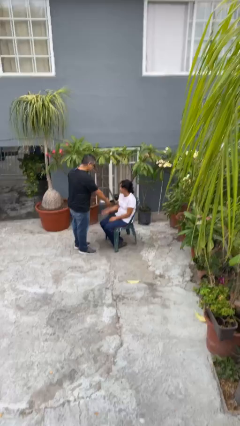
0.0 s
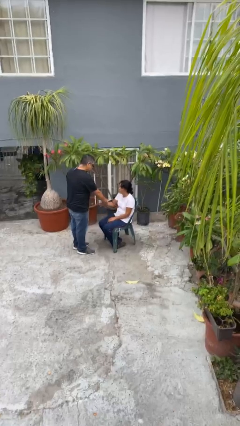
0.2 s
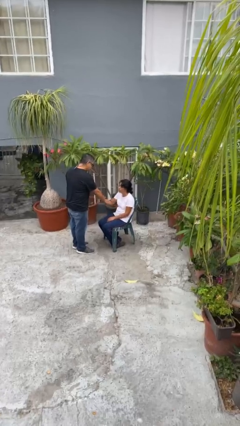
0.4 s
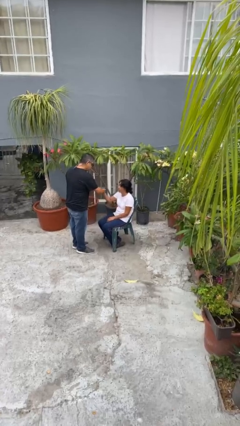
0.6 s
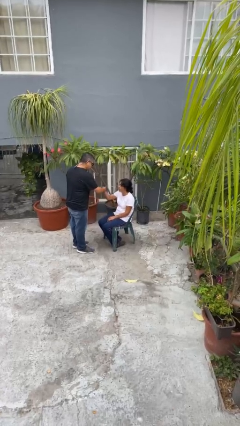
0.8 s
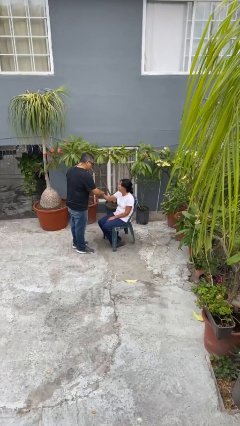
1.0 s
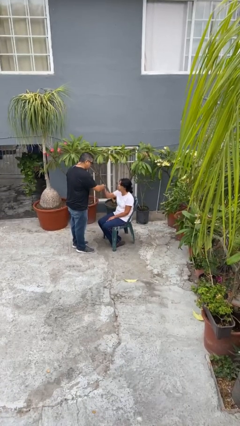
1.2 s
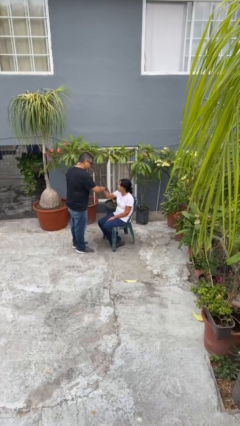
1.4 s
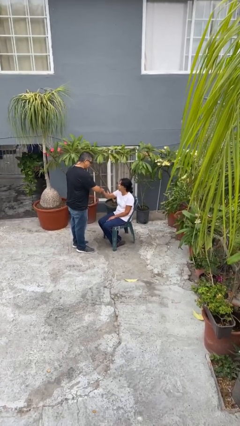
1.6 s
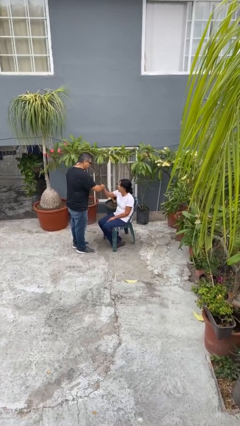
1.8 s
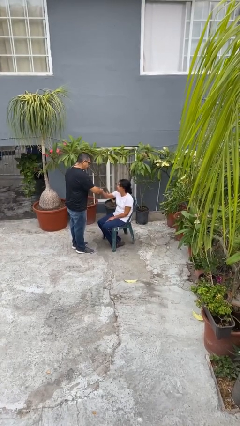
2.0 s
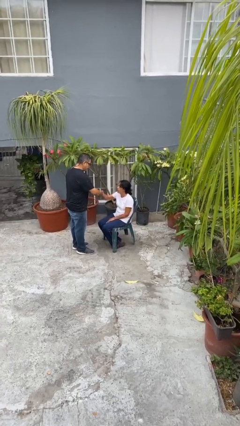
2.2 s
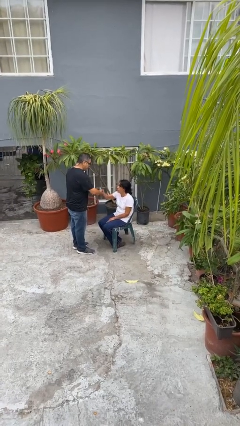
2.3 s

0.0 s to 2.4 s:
person shakes hand

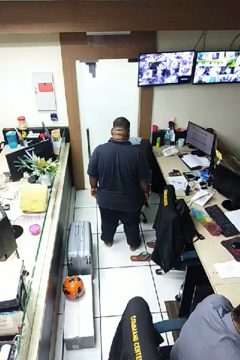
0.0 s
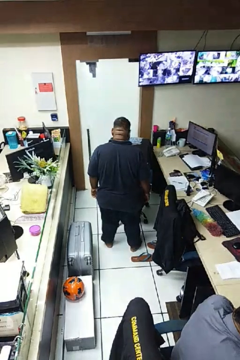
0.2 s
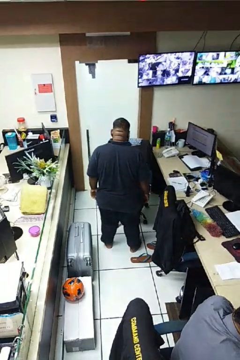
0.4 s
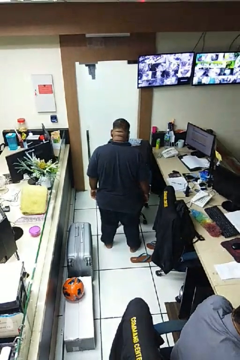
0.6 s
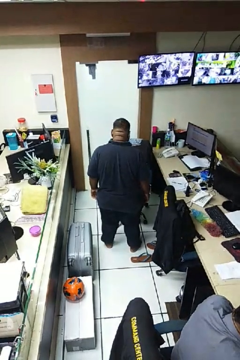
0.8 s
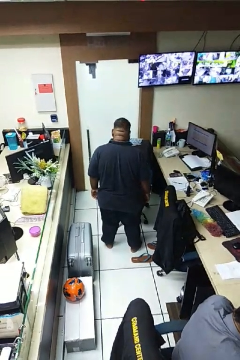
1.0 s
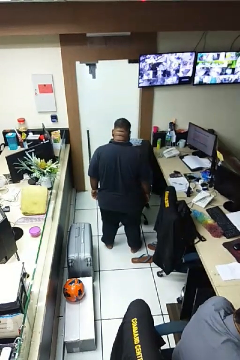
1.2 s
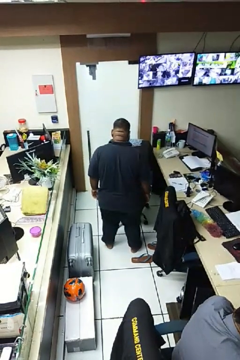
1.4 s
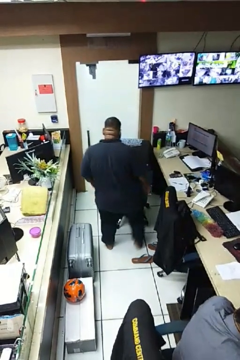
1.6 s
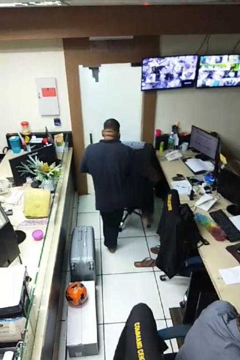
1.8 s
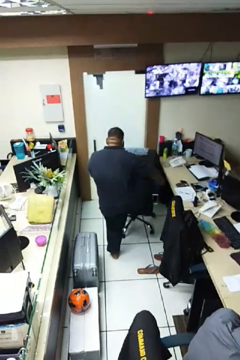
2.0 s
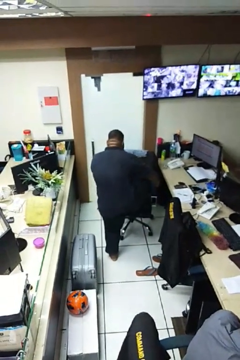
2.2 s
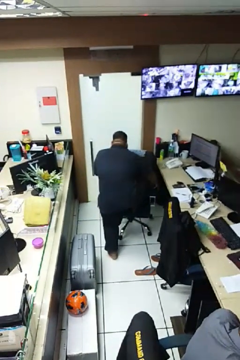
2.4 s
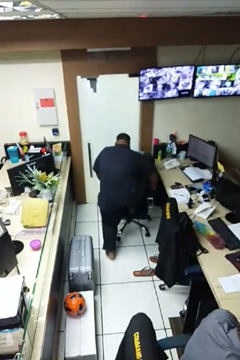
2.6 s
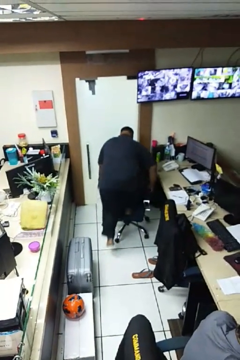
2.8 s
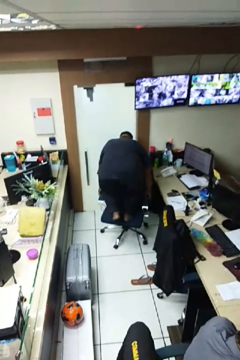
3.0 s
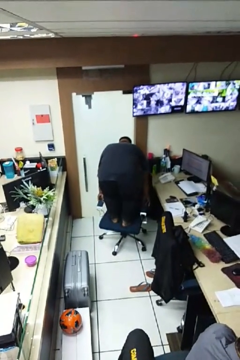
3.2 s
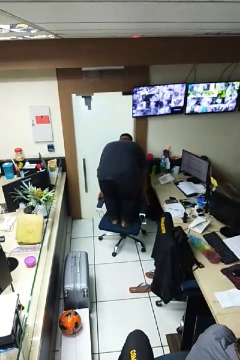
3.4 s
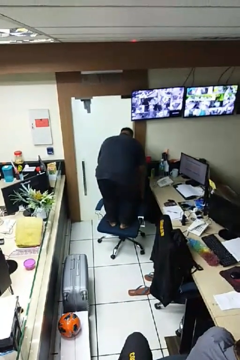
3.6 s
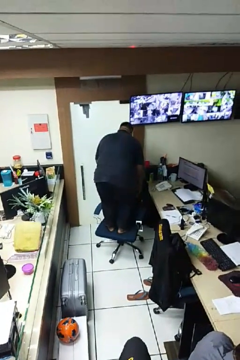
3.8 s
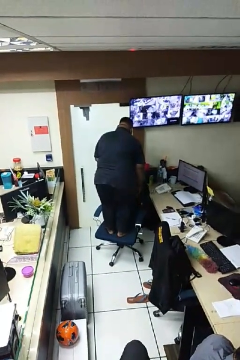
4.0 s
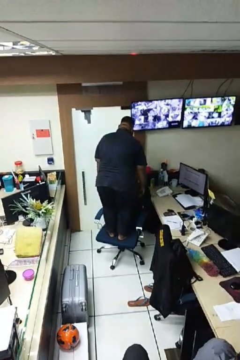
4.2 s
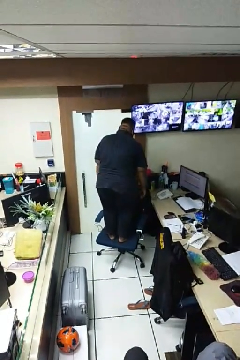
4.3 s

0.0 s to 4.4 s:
person climbs on chair

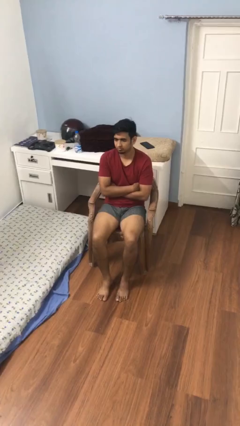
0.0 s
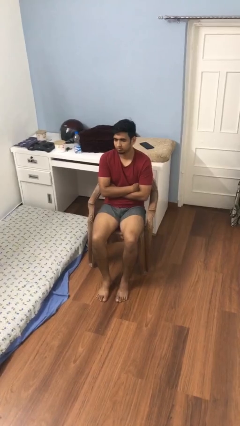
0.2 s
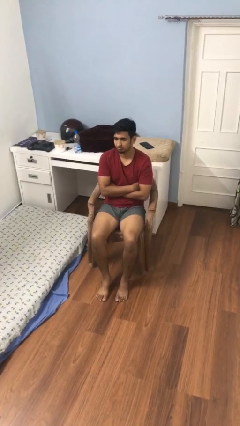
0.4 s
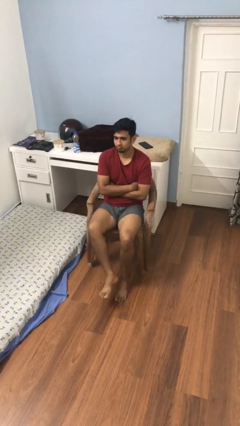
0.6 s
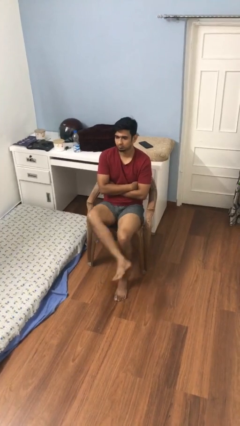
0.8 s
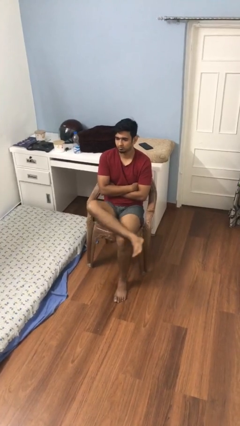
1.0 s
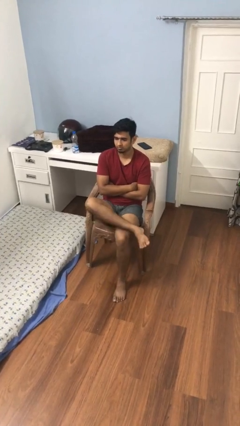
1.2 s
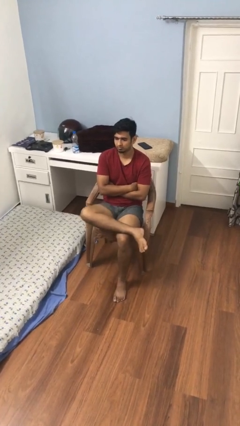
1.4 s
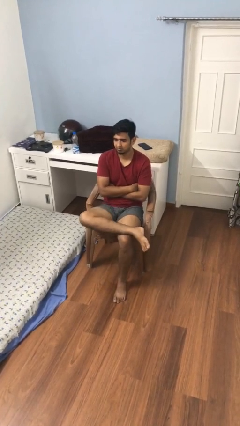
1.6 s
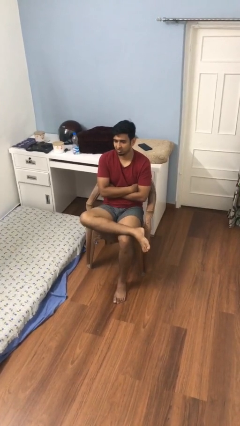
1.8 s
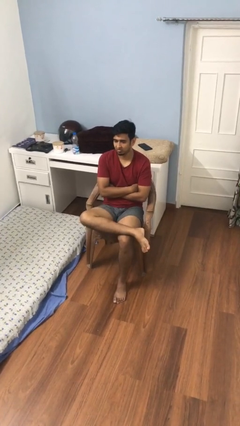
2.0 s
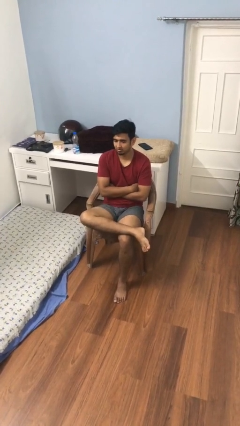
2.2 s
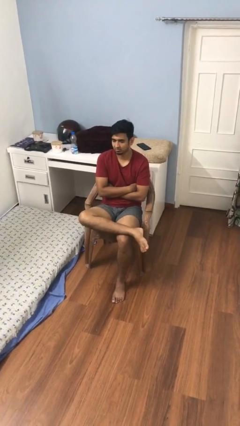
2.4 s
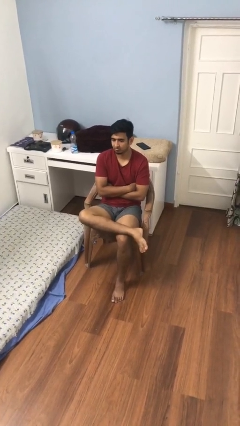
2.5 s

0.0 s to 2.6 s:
person crosses legs

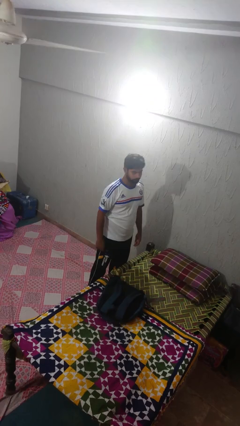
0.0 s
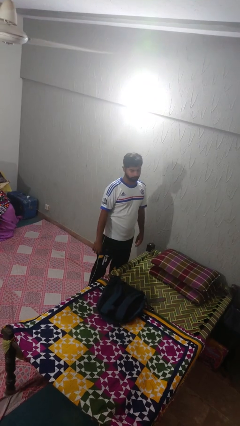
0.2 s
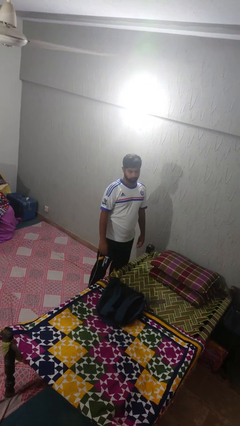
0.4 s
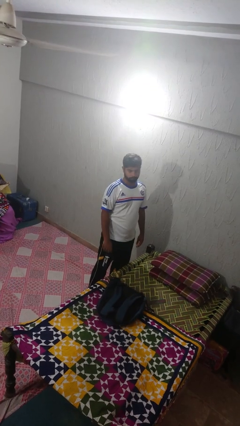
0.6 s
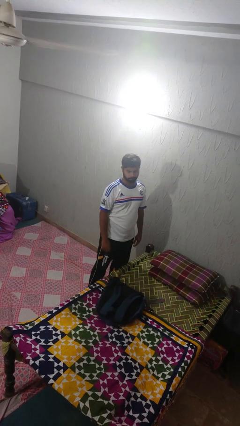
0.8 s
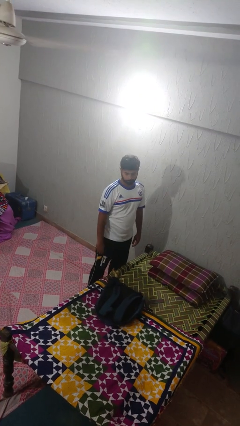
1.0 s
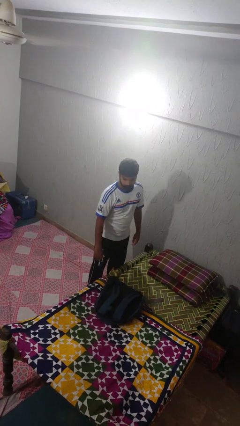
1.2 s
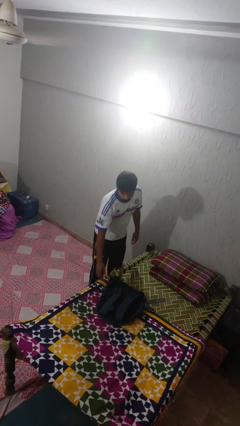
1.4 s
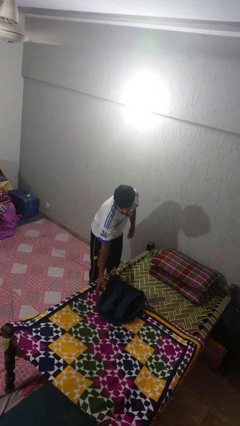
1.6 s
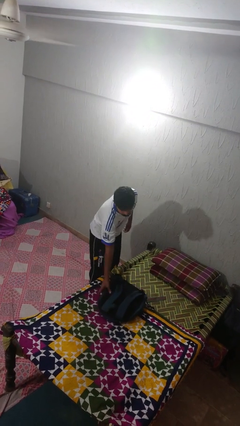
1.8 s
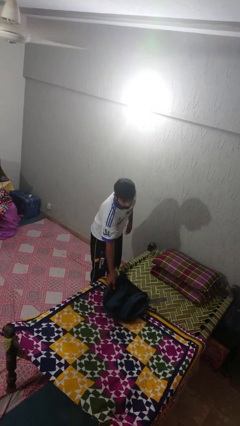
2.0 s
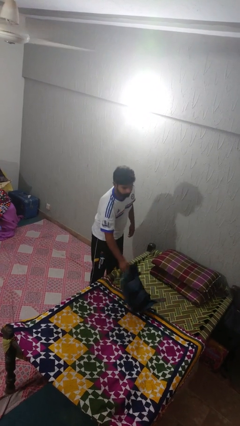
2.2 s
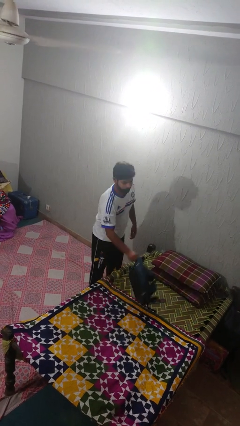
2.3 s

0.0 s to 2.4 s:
person picks up object from bed

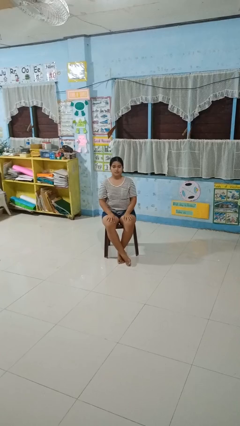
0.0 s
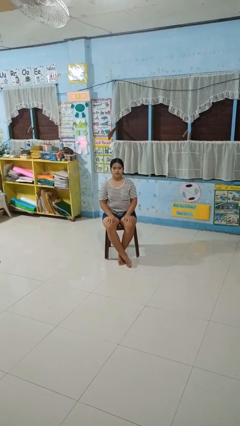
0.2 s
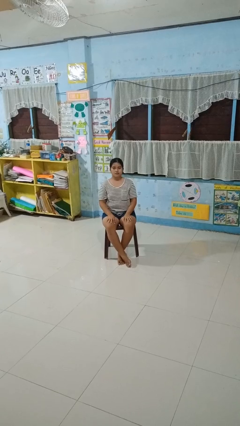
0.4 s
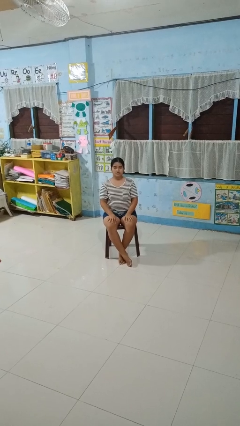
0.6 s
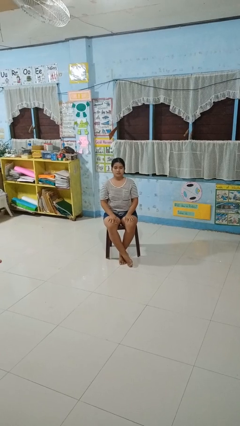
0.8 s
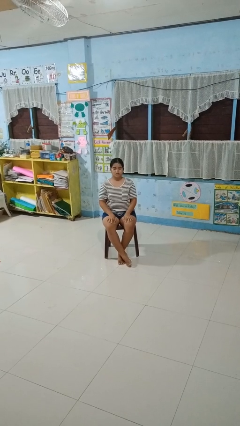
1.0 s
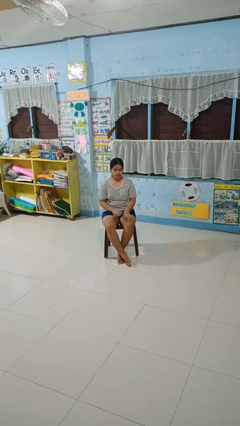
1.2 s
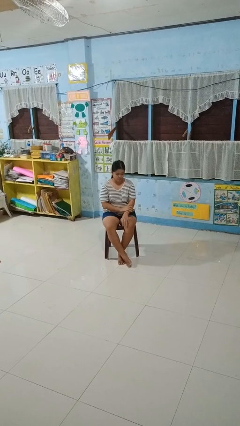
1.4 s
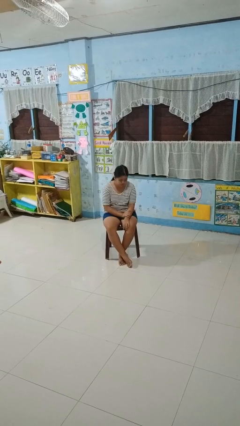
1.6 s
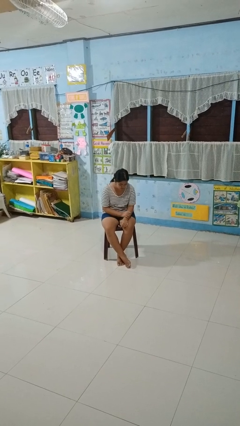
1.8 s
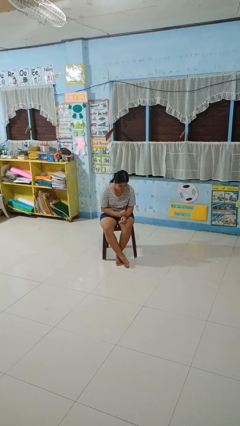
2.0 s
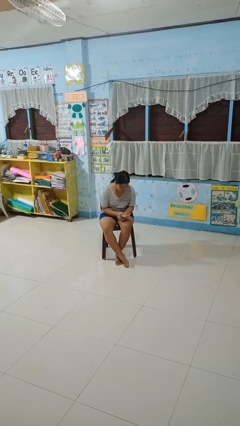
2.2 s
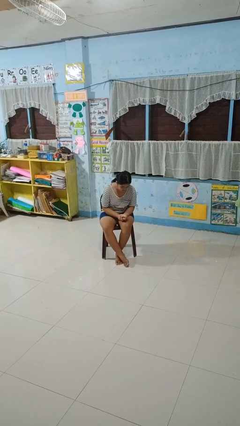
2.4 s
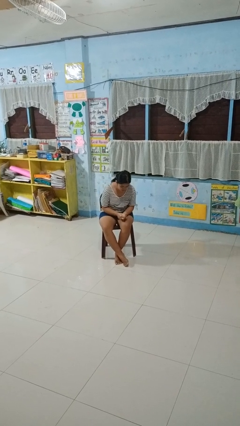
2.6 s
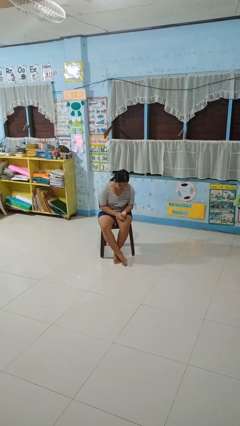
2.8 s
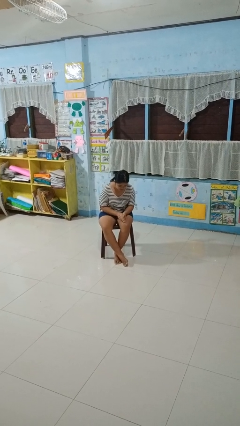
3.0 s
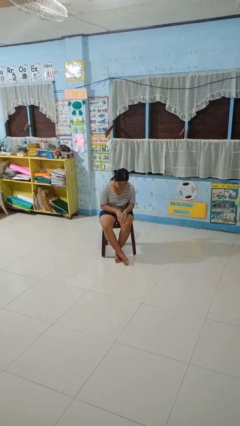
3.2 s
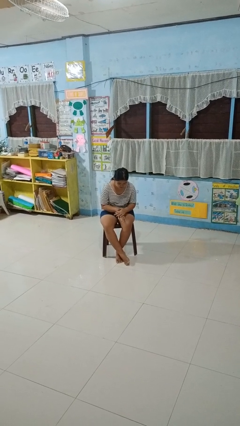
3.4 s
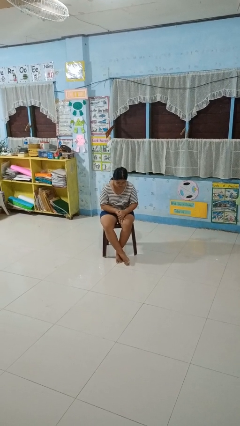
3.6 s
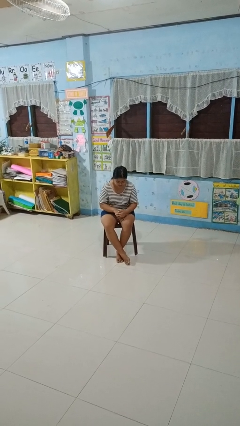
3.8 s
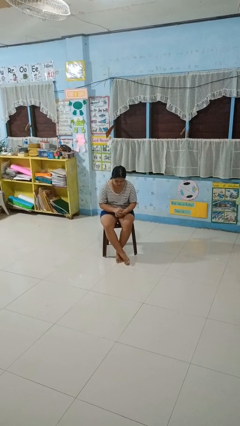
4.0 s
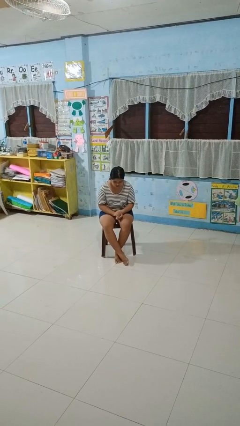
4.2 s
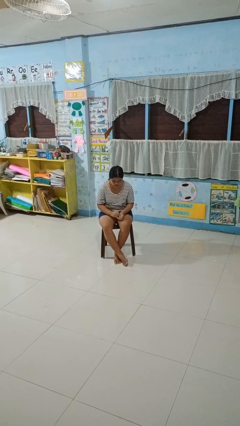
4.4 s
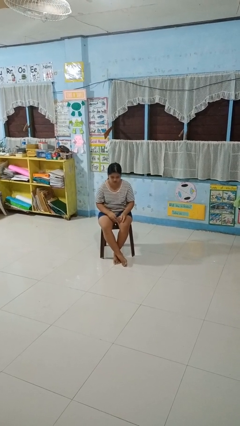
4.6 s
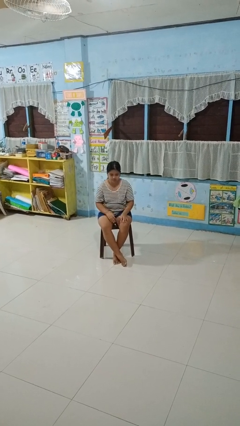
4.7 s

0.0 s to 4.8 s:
person looks at hands in lap

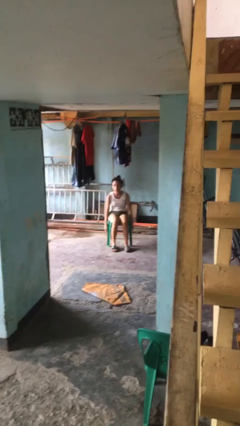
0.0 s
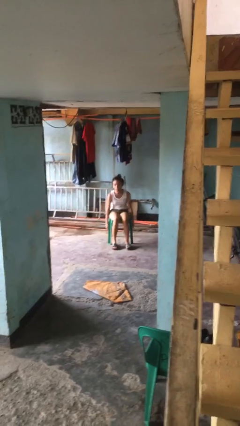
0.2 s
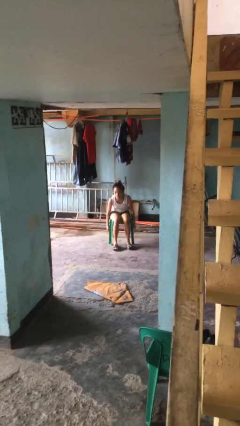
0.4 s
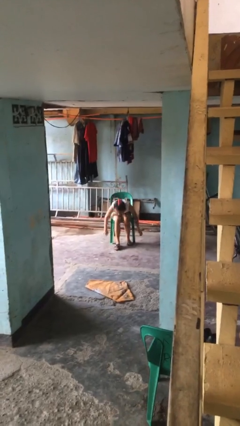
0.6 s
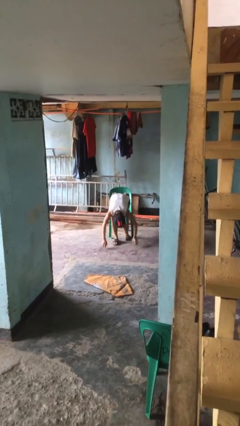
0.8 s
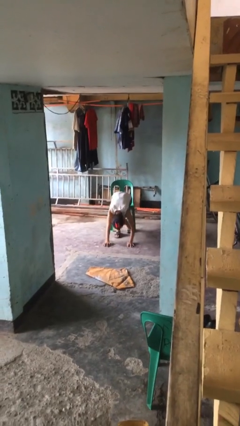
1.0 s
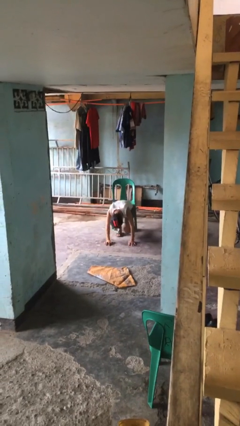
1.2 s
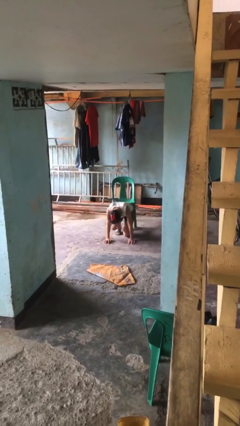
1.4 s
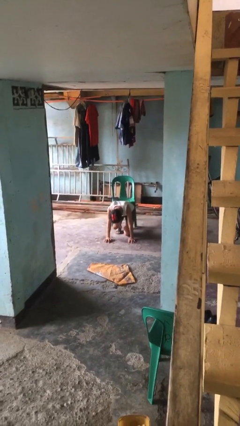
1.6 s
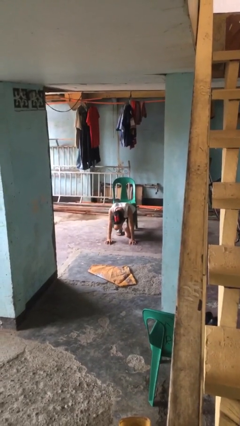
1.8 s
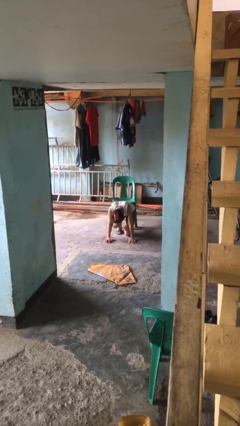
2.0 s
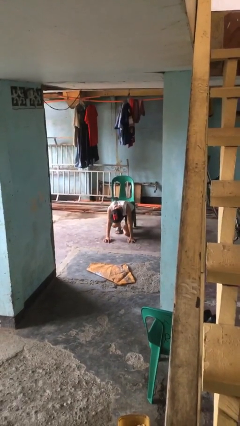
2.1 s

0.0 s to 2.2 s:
person falls from chair
